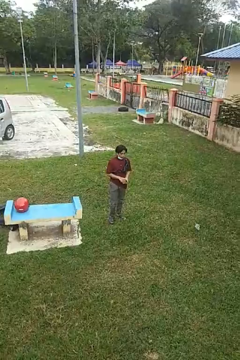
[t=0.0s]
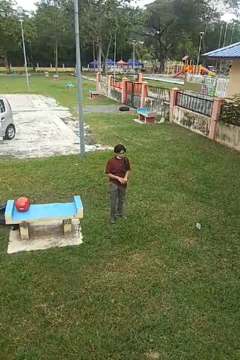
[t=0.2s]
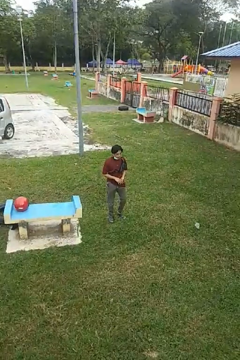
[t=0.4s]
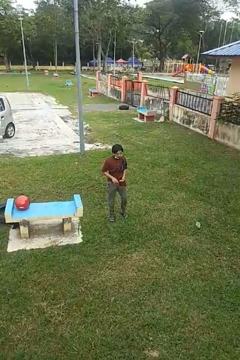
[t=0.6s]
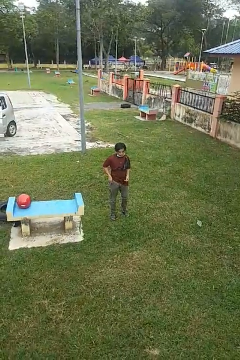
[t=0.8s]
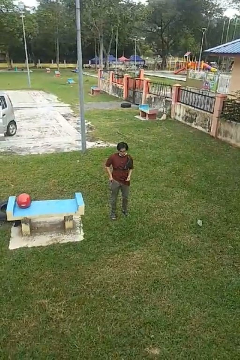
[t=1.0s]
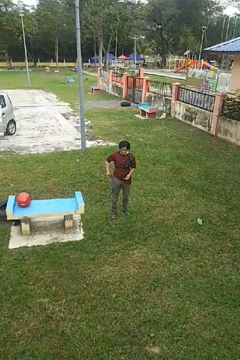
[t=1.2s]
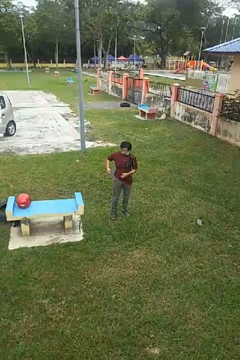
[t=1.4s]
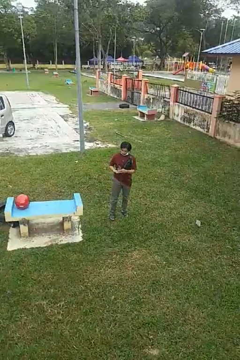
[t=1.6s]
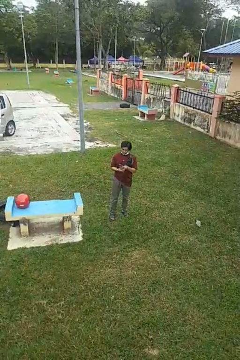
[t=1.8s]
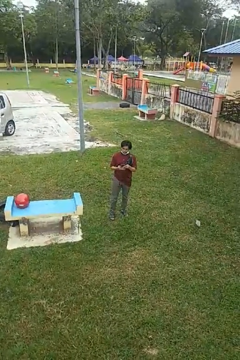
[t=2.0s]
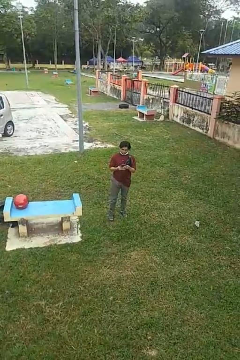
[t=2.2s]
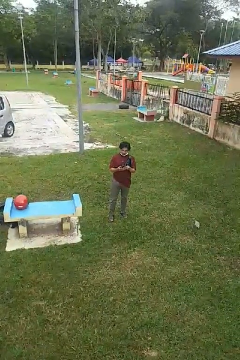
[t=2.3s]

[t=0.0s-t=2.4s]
person takes phone from pocket

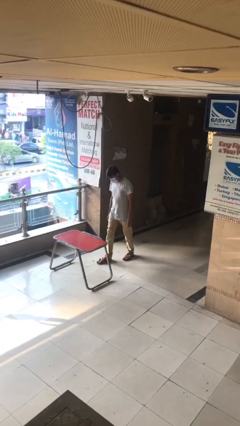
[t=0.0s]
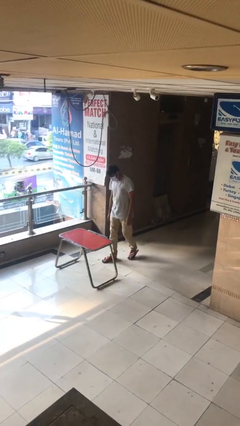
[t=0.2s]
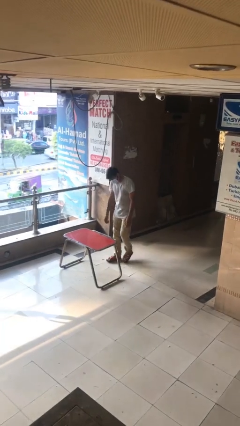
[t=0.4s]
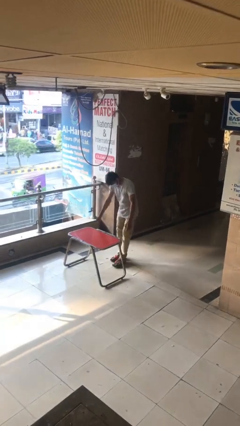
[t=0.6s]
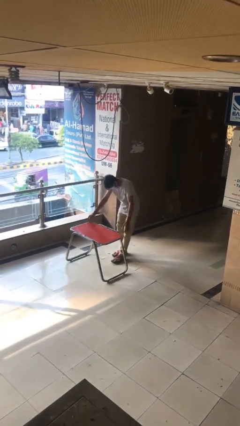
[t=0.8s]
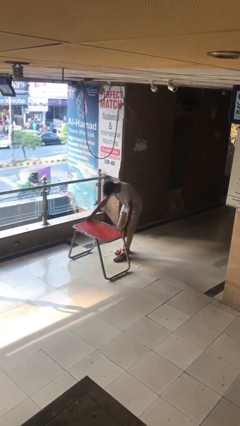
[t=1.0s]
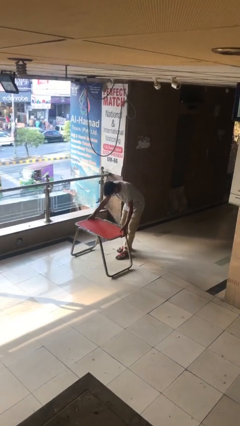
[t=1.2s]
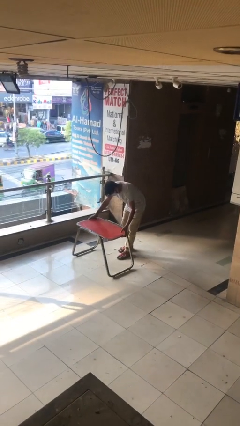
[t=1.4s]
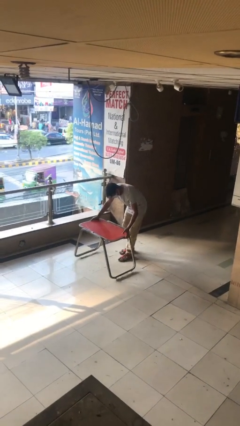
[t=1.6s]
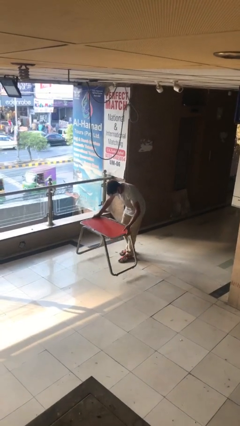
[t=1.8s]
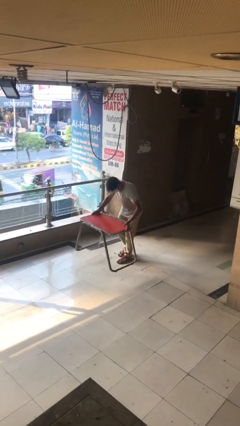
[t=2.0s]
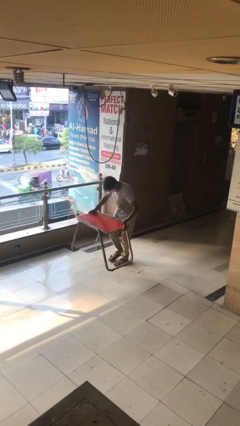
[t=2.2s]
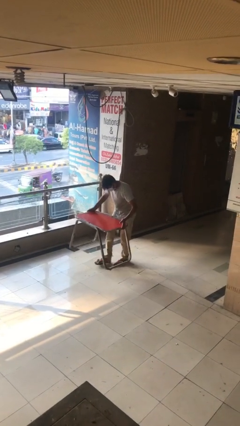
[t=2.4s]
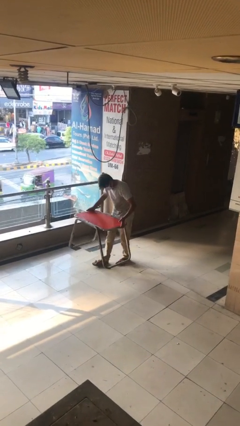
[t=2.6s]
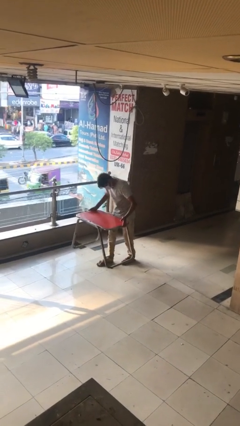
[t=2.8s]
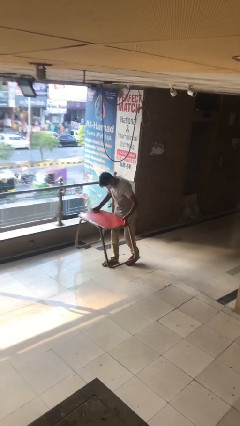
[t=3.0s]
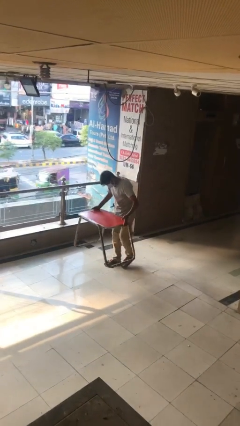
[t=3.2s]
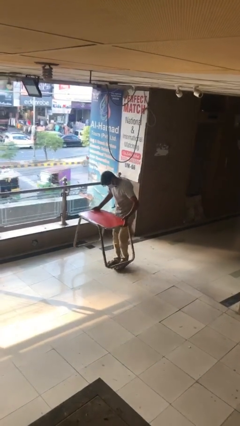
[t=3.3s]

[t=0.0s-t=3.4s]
person picks up object from floor

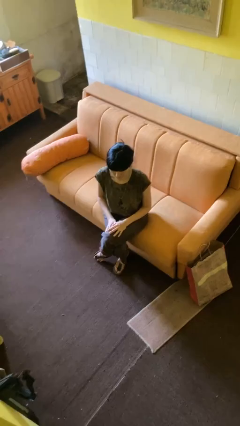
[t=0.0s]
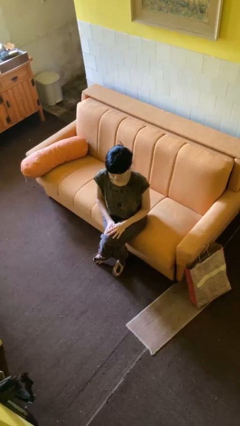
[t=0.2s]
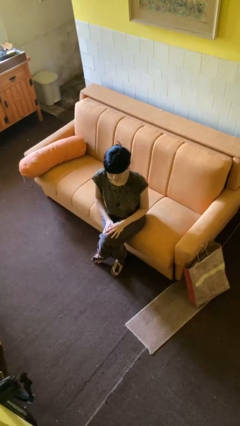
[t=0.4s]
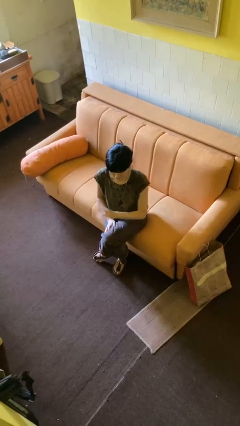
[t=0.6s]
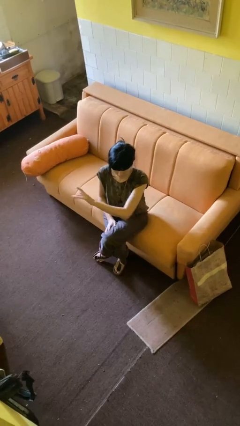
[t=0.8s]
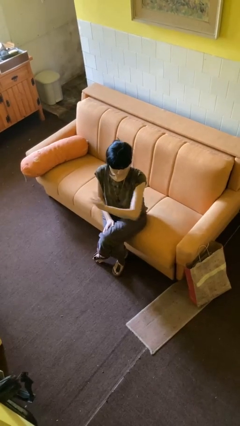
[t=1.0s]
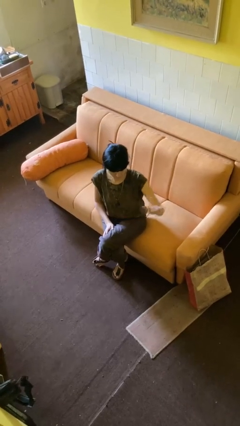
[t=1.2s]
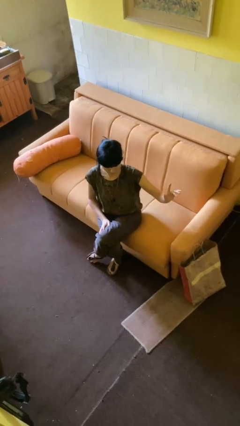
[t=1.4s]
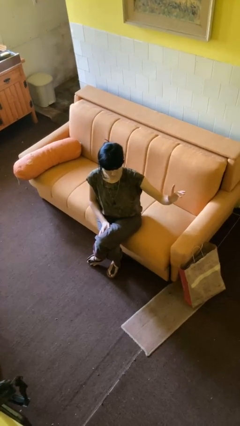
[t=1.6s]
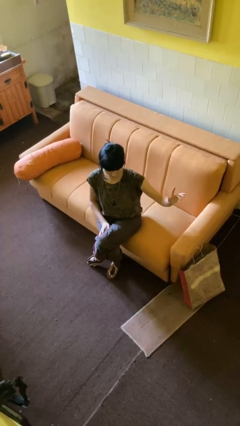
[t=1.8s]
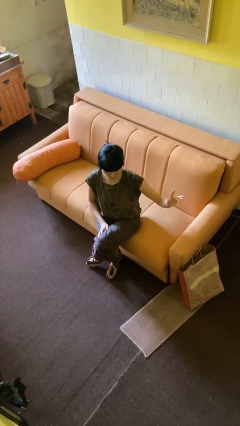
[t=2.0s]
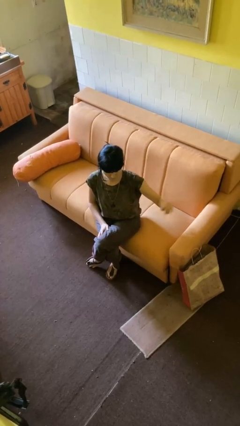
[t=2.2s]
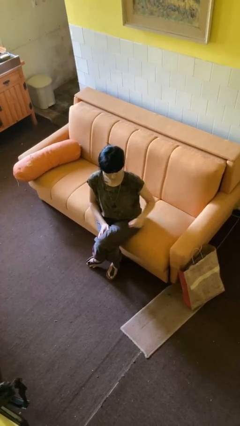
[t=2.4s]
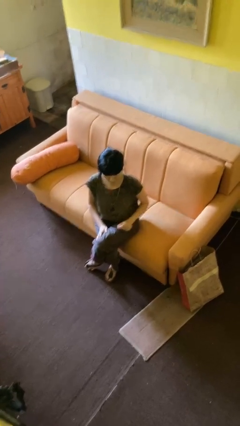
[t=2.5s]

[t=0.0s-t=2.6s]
person gestures swipe left

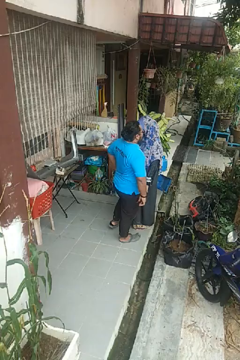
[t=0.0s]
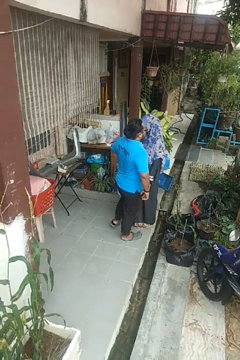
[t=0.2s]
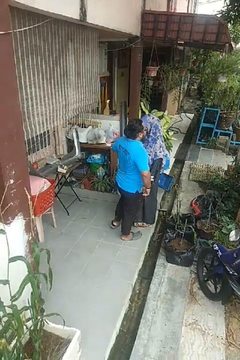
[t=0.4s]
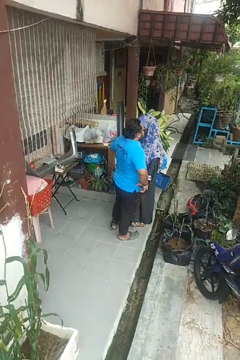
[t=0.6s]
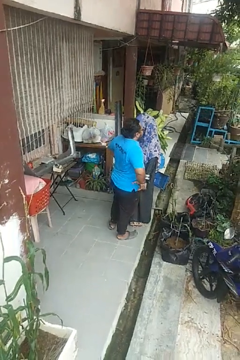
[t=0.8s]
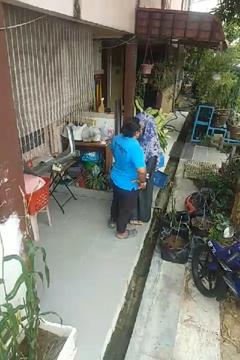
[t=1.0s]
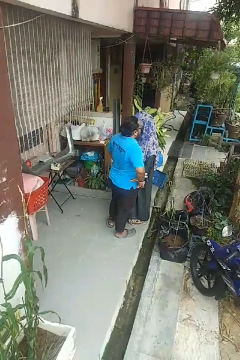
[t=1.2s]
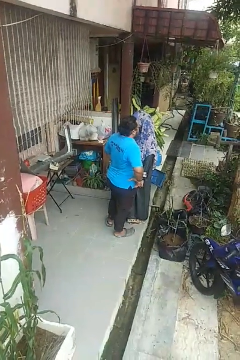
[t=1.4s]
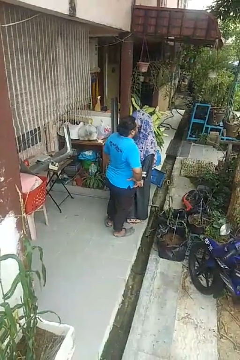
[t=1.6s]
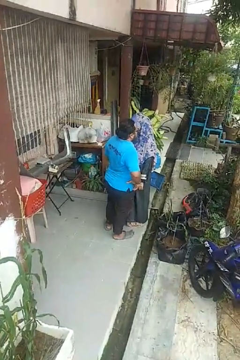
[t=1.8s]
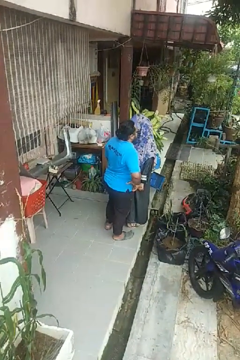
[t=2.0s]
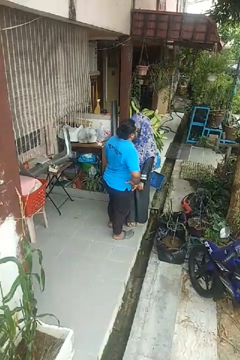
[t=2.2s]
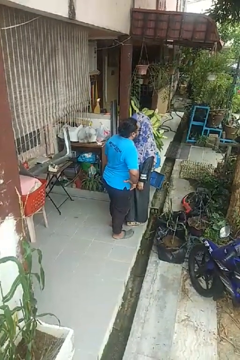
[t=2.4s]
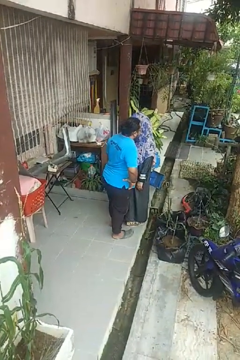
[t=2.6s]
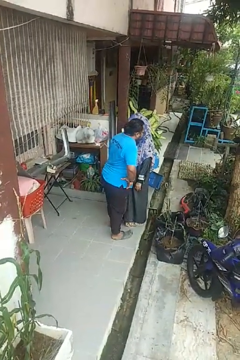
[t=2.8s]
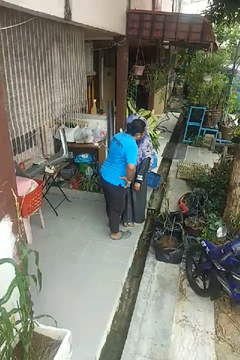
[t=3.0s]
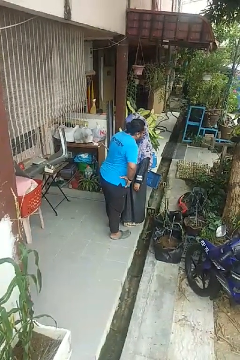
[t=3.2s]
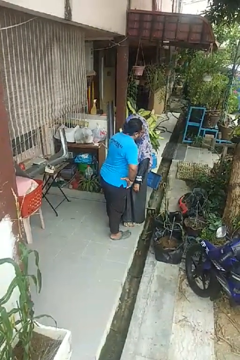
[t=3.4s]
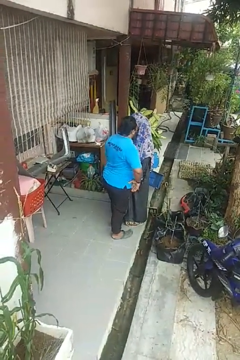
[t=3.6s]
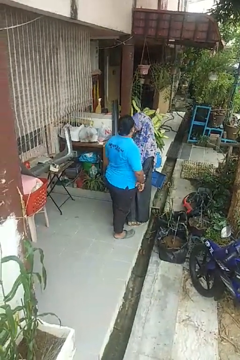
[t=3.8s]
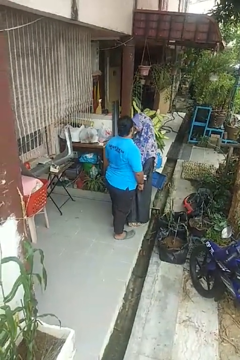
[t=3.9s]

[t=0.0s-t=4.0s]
person kisses cheek of person

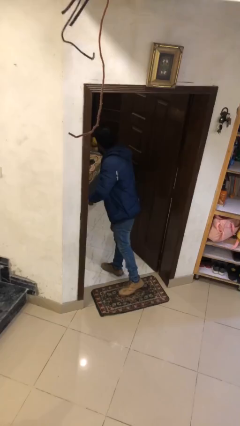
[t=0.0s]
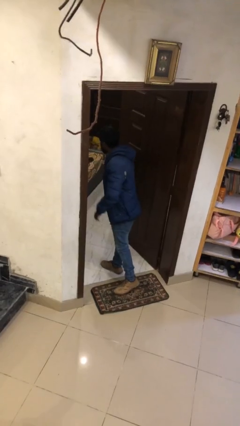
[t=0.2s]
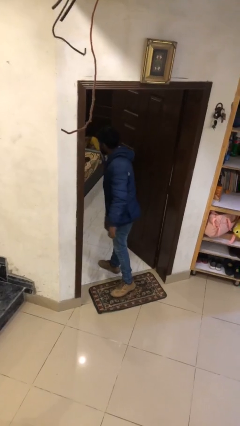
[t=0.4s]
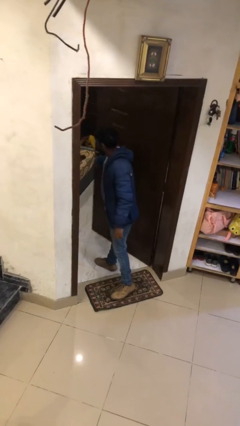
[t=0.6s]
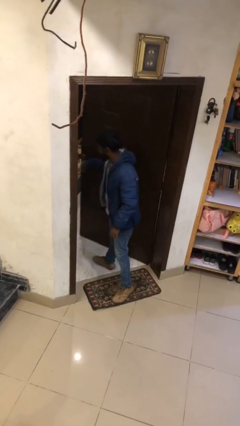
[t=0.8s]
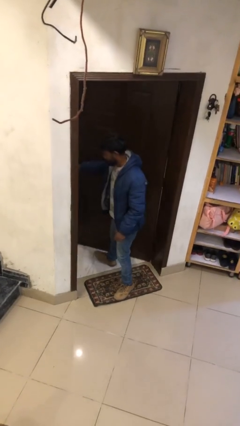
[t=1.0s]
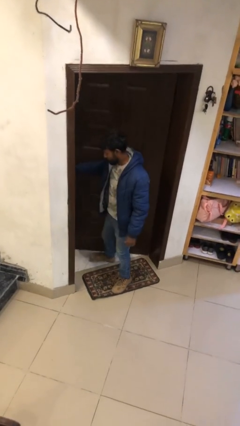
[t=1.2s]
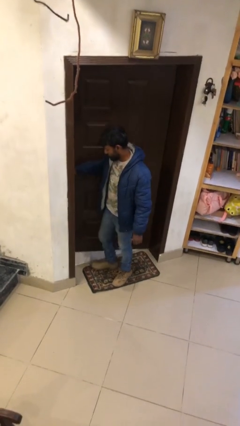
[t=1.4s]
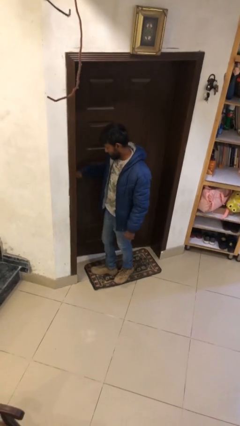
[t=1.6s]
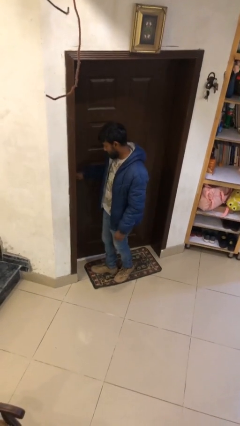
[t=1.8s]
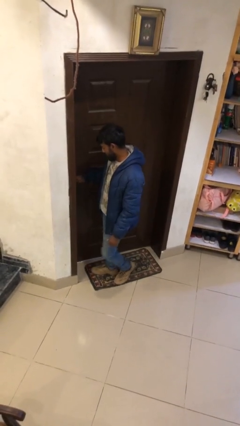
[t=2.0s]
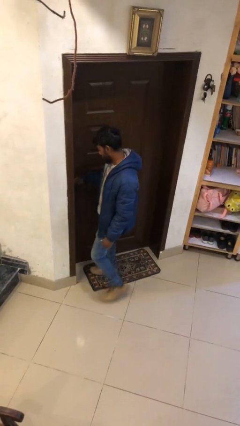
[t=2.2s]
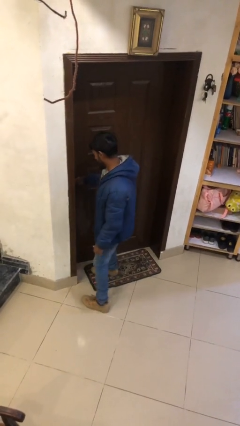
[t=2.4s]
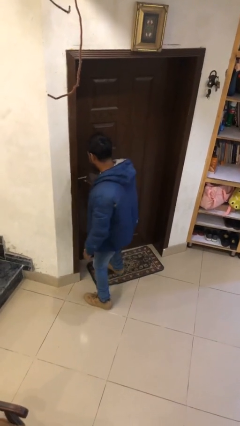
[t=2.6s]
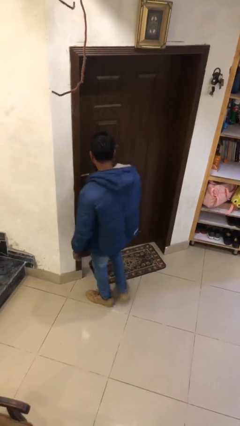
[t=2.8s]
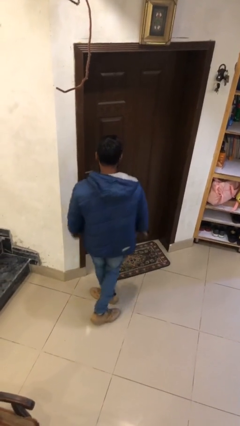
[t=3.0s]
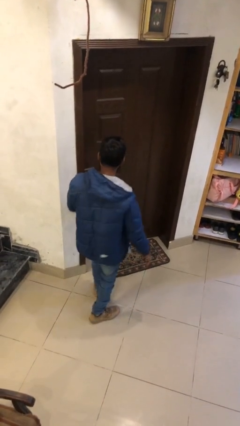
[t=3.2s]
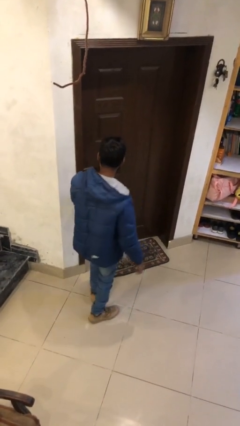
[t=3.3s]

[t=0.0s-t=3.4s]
person closes facility door

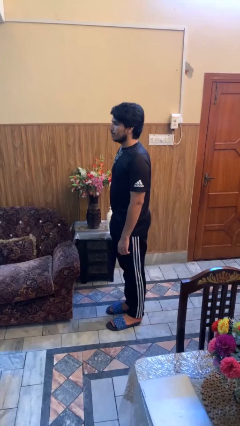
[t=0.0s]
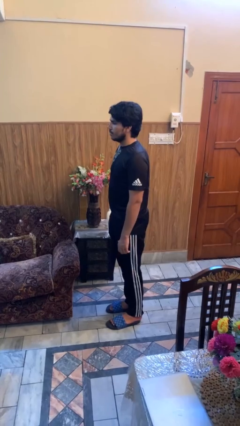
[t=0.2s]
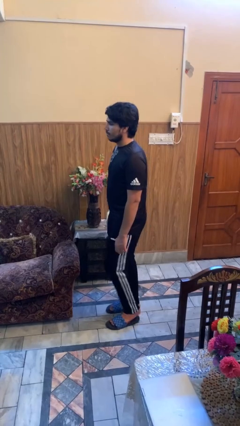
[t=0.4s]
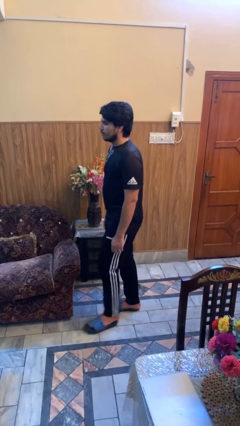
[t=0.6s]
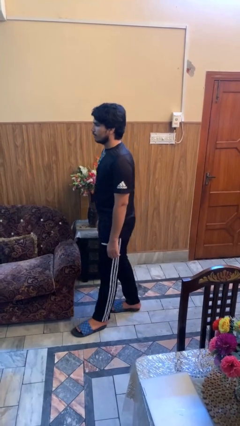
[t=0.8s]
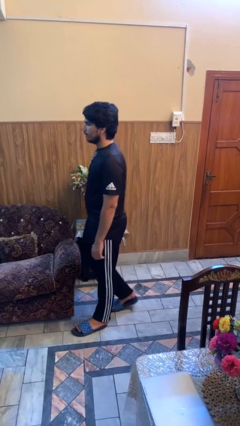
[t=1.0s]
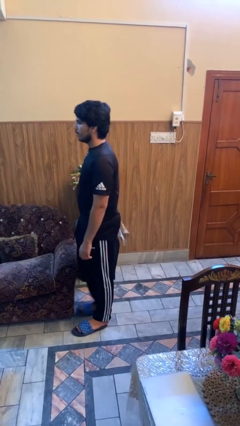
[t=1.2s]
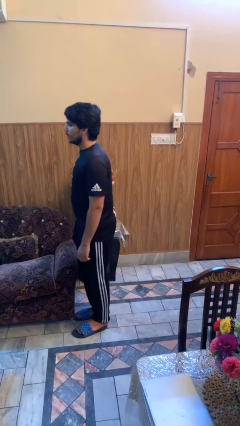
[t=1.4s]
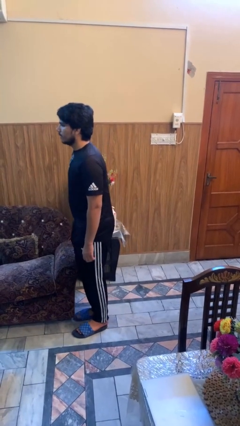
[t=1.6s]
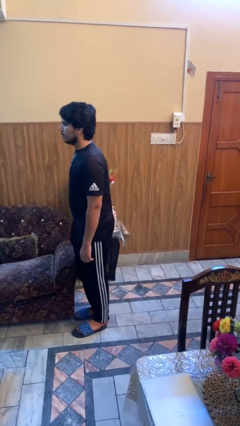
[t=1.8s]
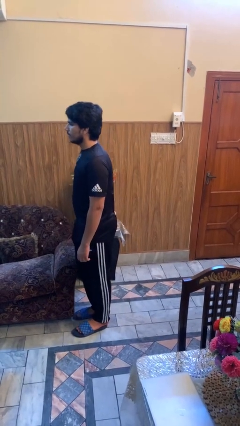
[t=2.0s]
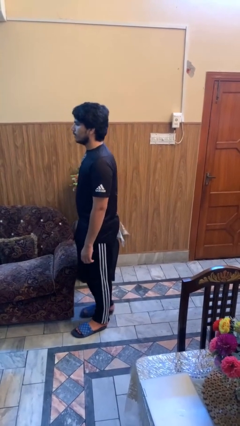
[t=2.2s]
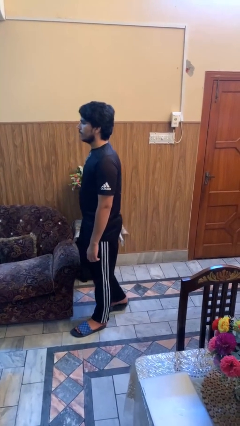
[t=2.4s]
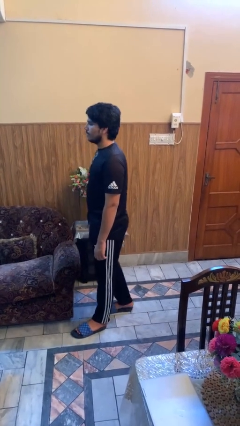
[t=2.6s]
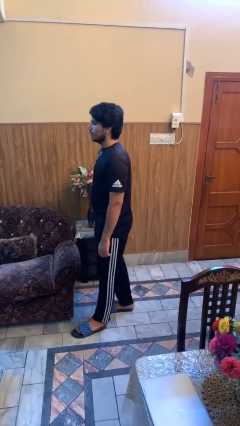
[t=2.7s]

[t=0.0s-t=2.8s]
person stubs toe
